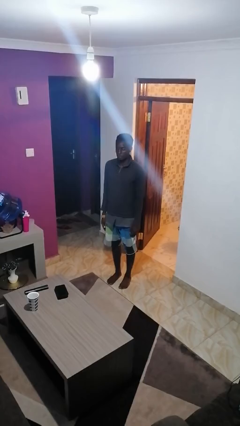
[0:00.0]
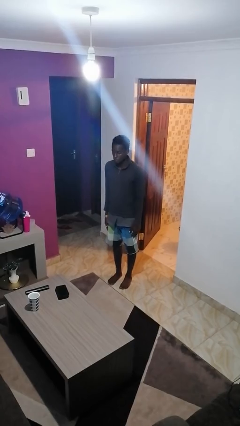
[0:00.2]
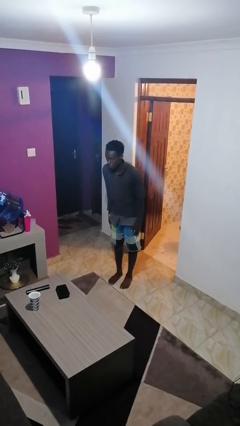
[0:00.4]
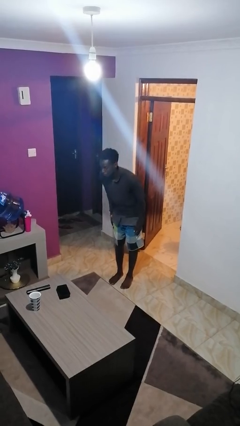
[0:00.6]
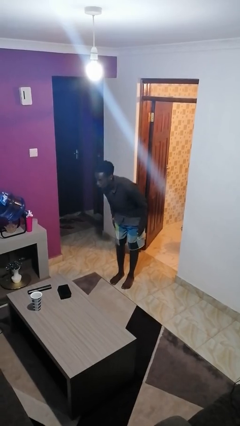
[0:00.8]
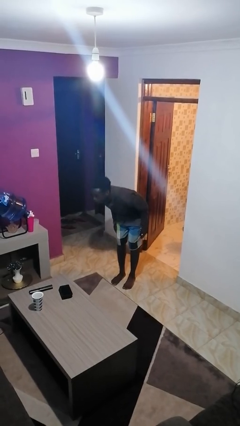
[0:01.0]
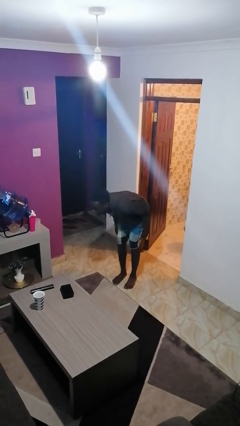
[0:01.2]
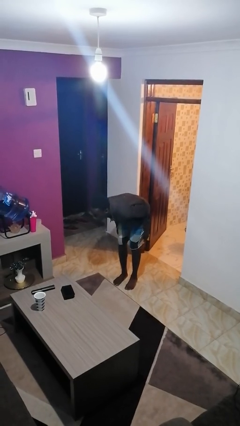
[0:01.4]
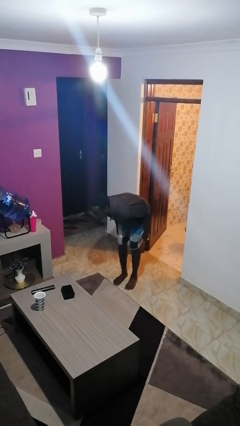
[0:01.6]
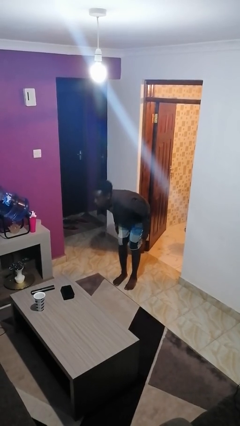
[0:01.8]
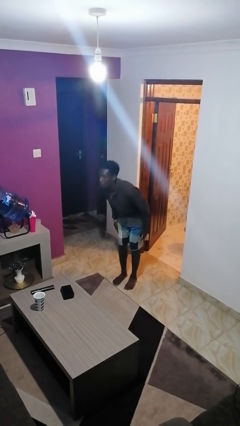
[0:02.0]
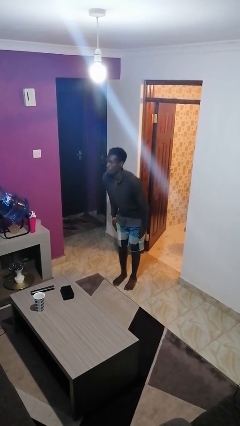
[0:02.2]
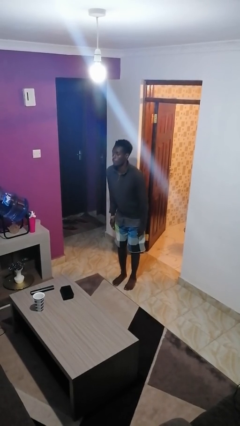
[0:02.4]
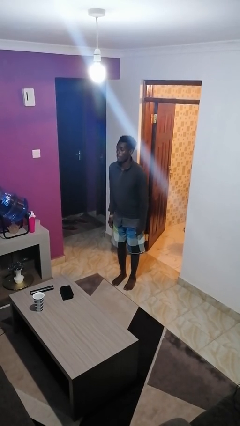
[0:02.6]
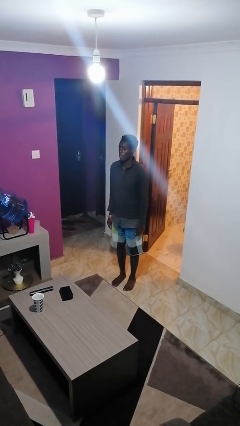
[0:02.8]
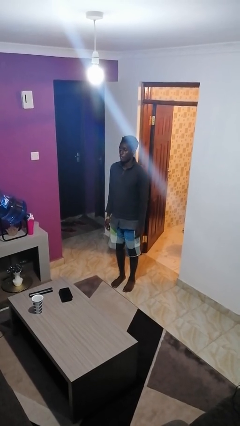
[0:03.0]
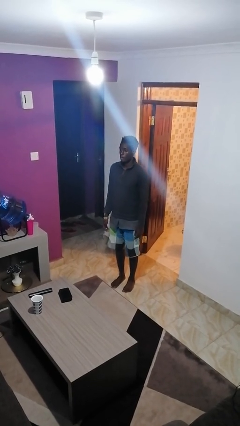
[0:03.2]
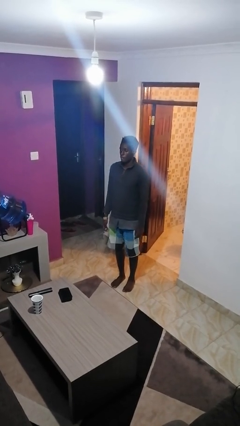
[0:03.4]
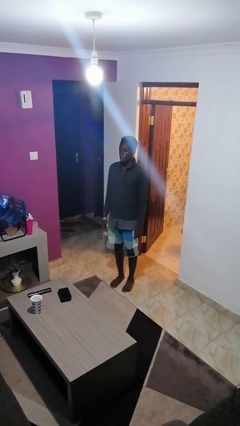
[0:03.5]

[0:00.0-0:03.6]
person bows

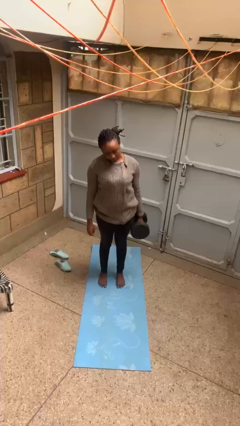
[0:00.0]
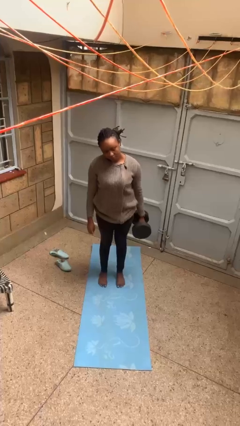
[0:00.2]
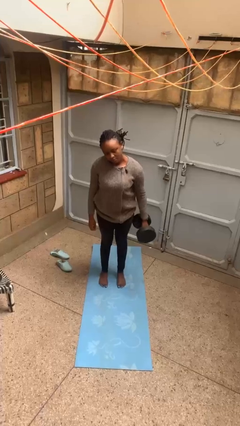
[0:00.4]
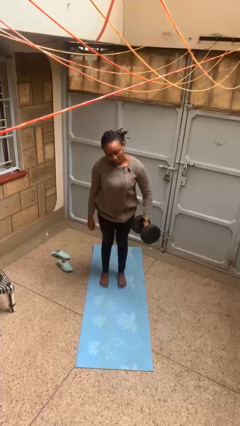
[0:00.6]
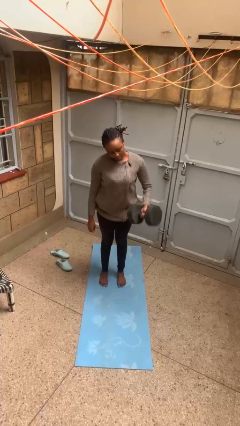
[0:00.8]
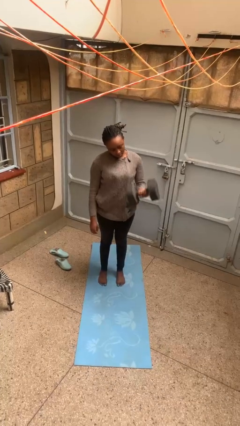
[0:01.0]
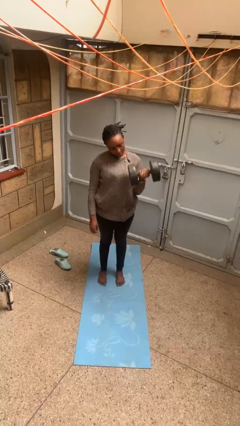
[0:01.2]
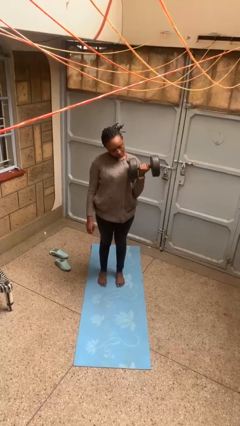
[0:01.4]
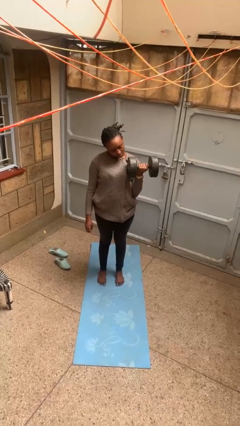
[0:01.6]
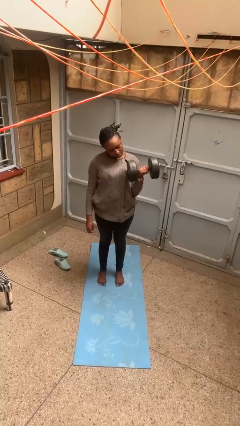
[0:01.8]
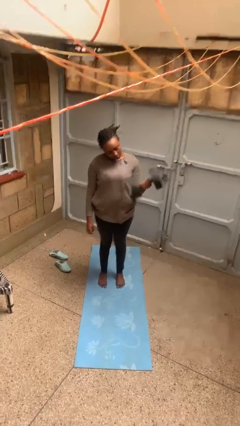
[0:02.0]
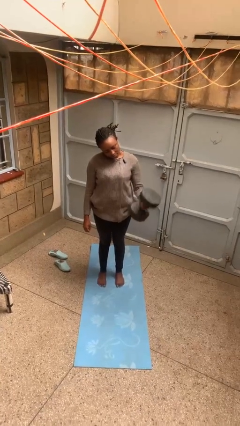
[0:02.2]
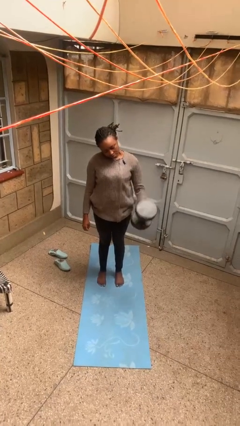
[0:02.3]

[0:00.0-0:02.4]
person lifts dumbbells

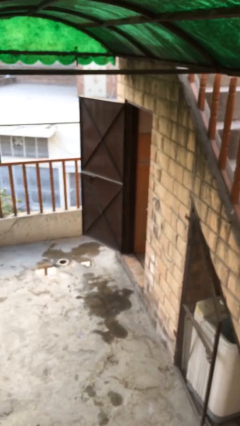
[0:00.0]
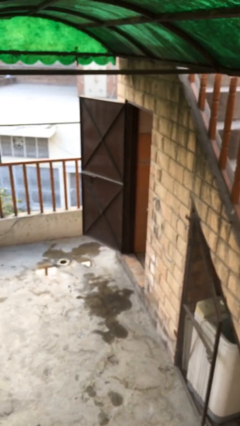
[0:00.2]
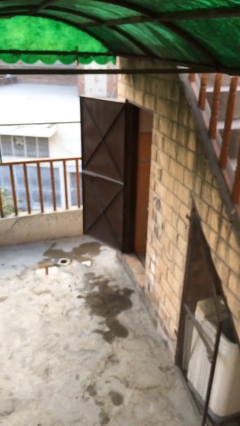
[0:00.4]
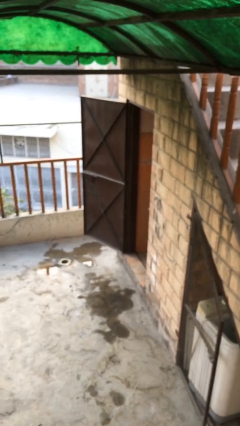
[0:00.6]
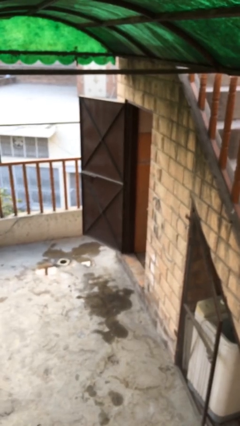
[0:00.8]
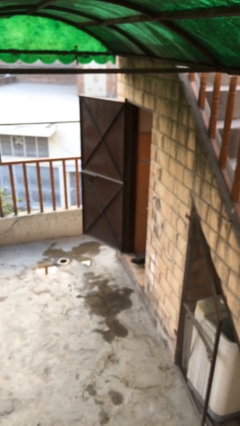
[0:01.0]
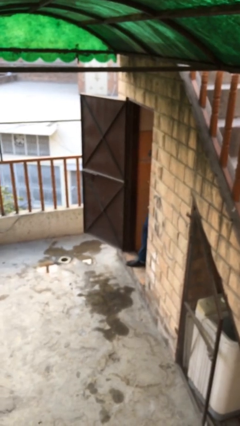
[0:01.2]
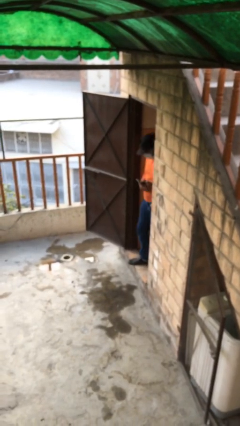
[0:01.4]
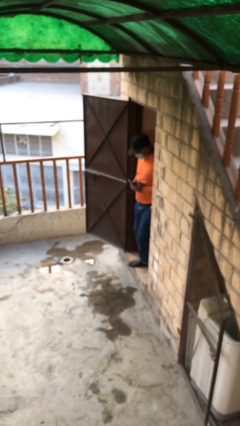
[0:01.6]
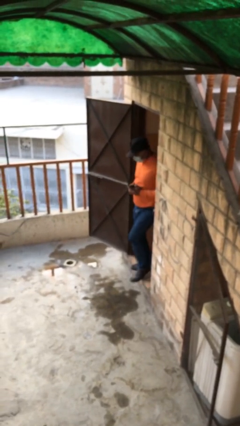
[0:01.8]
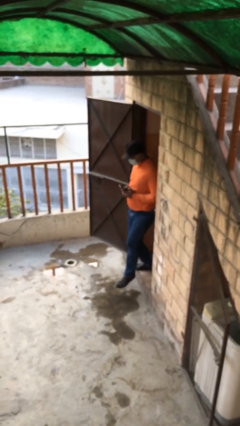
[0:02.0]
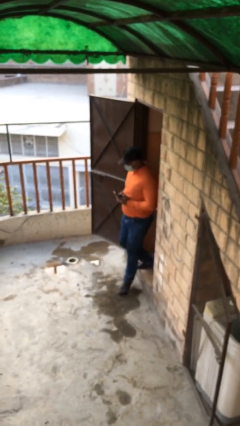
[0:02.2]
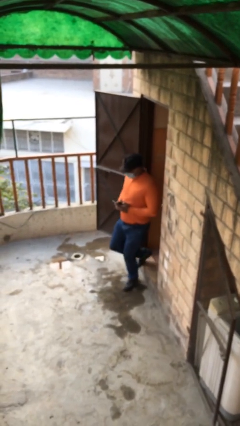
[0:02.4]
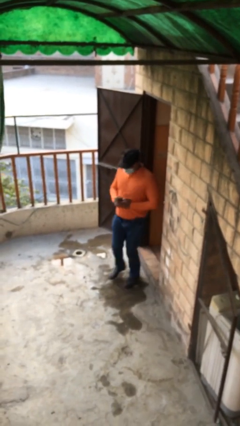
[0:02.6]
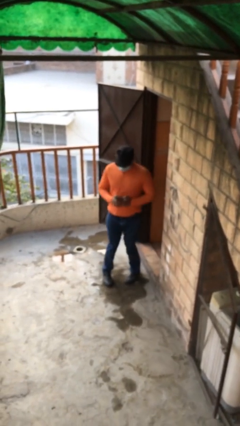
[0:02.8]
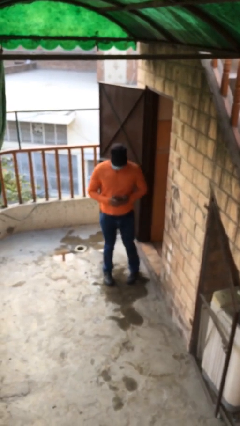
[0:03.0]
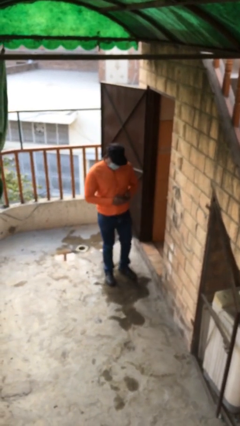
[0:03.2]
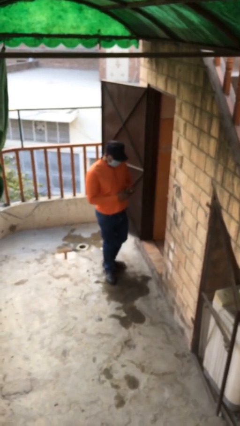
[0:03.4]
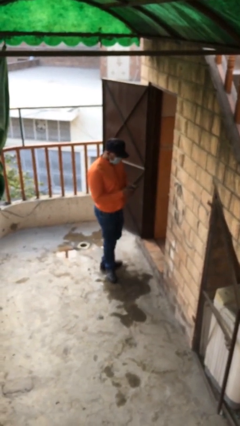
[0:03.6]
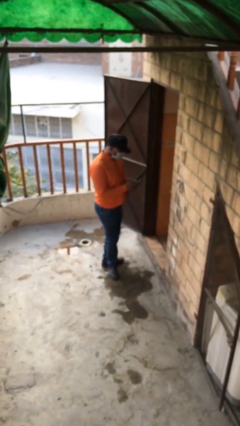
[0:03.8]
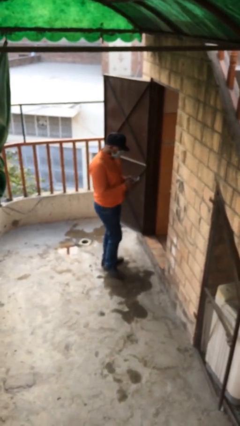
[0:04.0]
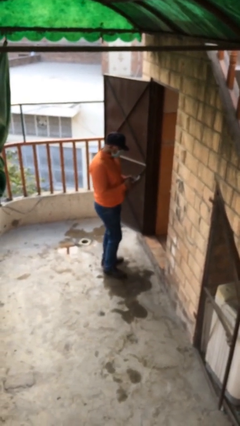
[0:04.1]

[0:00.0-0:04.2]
person exits scene through structure

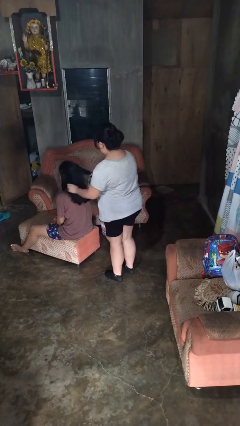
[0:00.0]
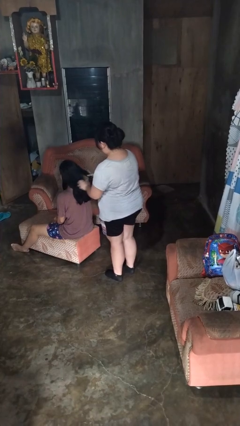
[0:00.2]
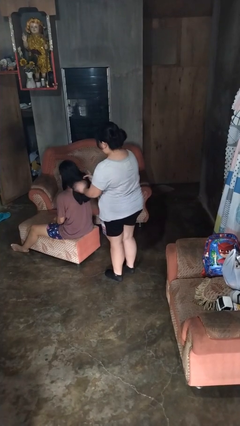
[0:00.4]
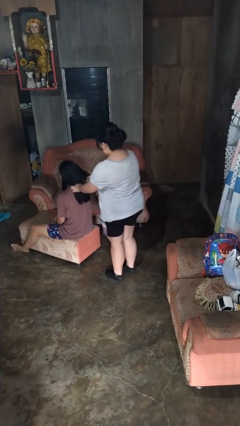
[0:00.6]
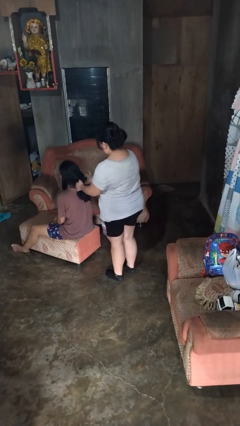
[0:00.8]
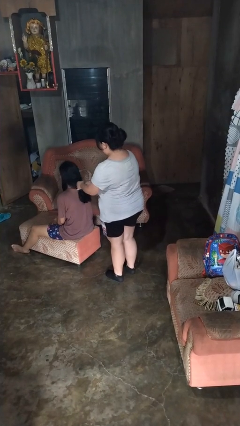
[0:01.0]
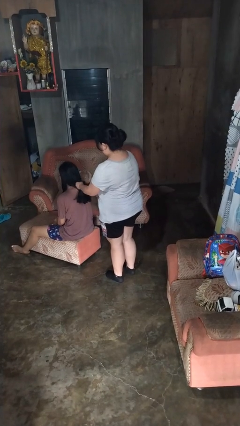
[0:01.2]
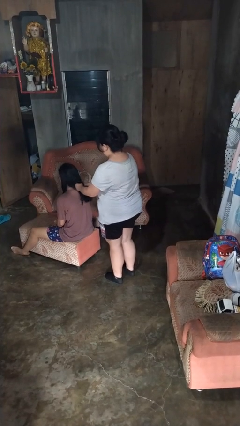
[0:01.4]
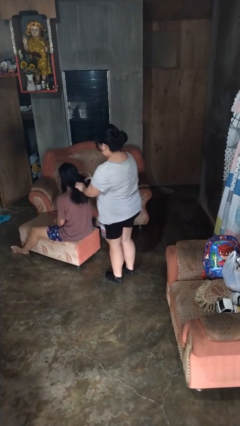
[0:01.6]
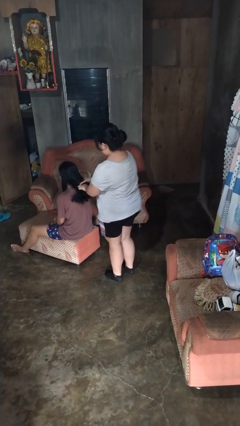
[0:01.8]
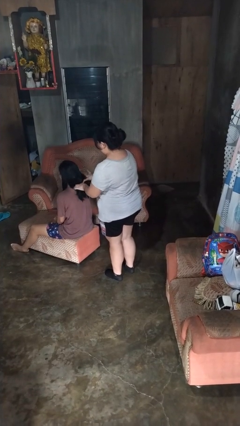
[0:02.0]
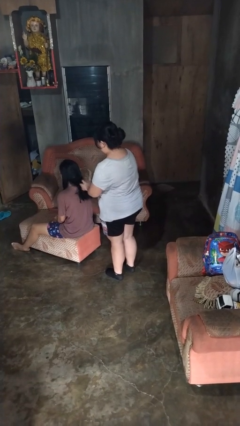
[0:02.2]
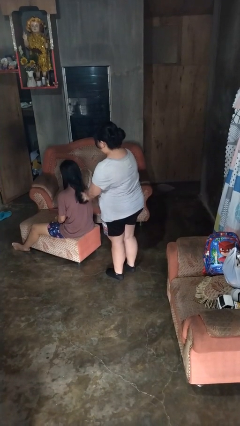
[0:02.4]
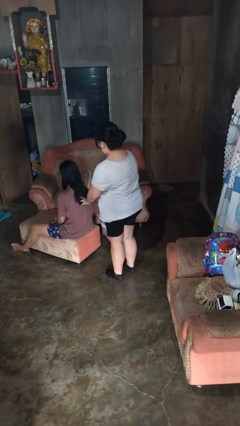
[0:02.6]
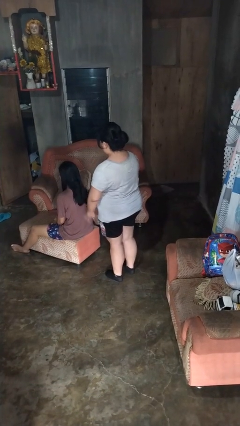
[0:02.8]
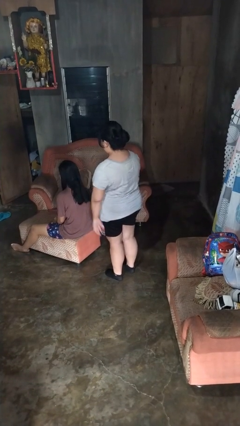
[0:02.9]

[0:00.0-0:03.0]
person braids hair of person

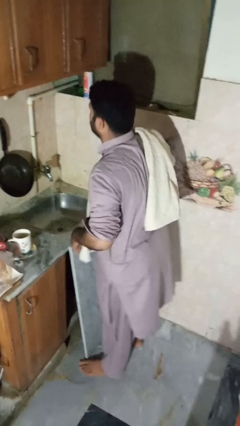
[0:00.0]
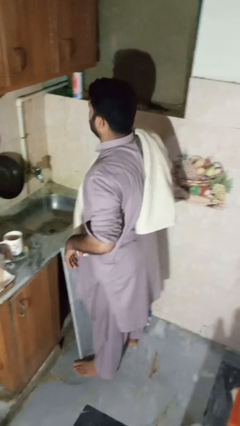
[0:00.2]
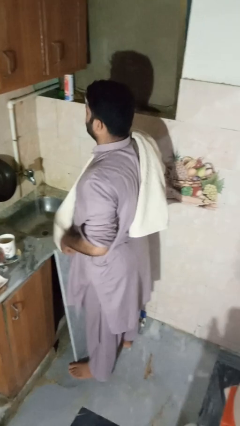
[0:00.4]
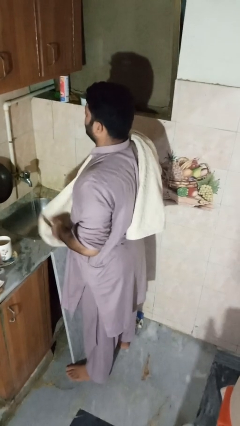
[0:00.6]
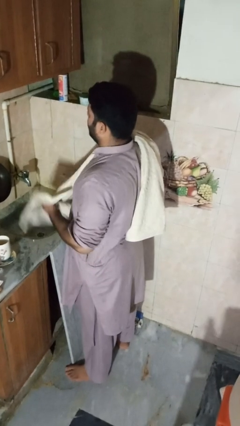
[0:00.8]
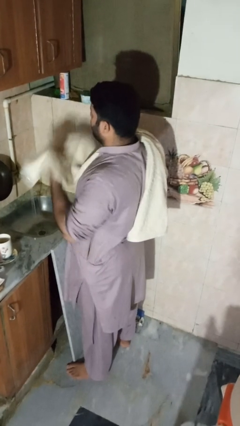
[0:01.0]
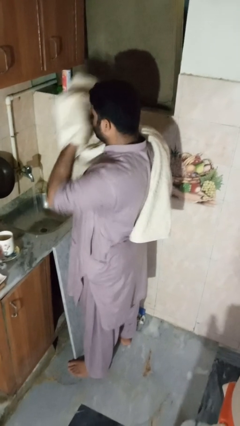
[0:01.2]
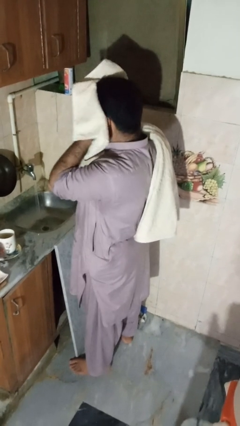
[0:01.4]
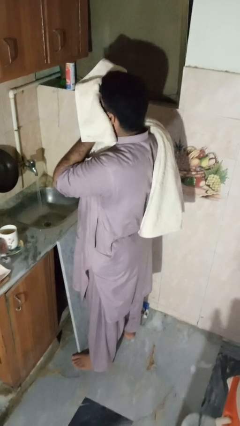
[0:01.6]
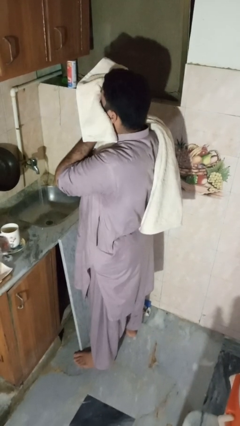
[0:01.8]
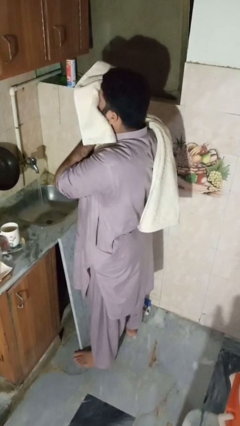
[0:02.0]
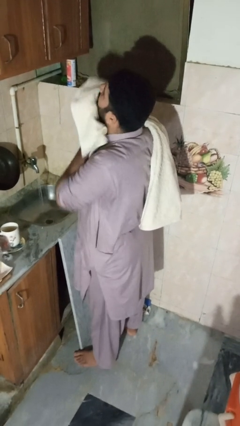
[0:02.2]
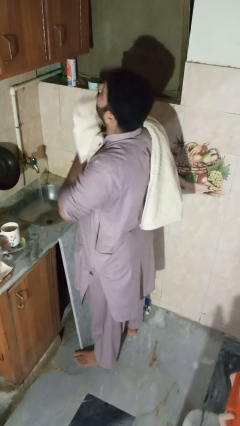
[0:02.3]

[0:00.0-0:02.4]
person dries face with towel

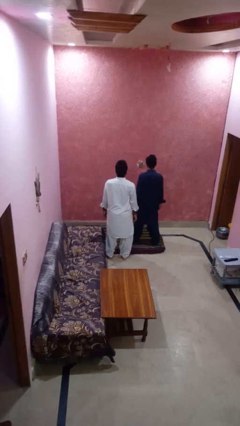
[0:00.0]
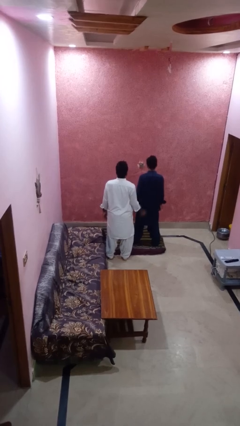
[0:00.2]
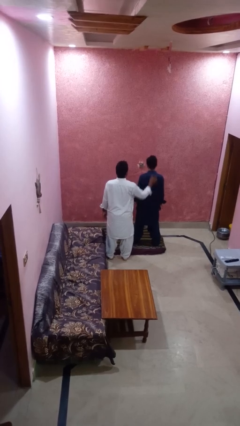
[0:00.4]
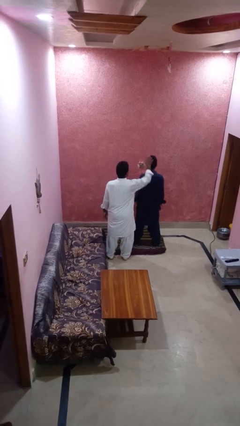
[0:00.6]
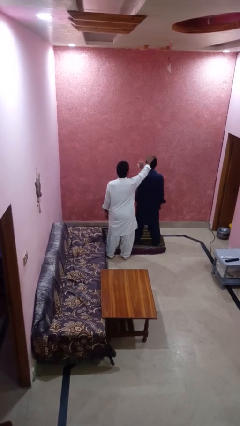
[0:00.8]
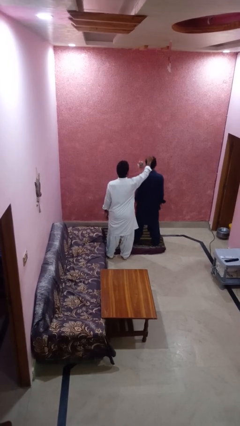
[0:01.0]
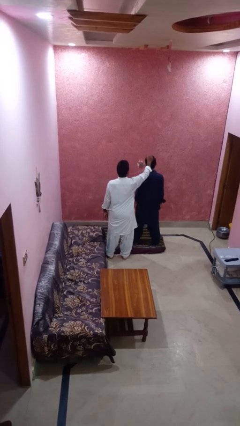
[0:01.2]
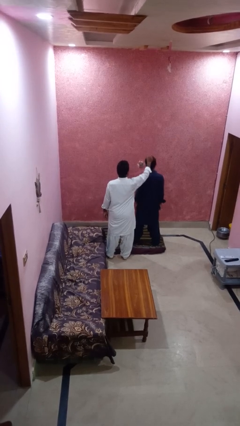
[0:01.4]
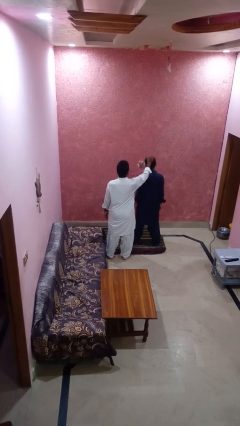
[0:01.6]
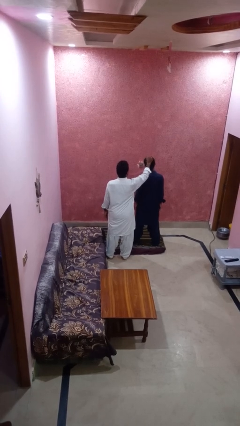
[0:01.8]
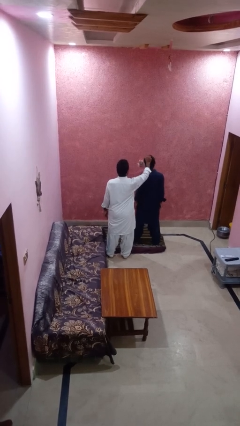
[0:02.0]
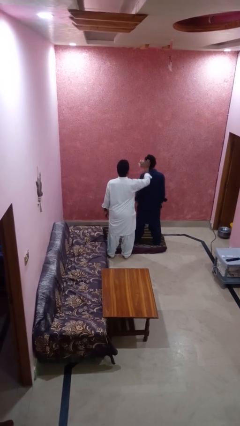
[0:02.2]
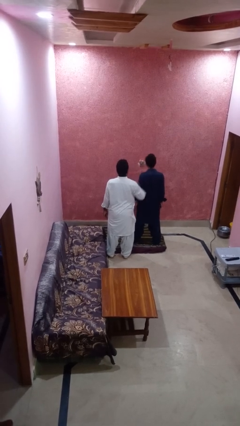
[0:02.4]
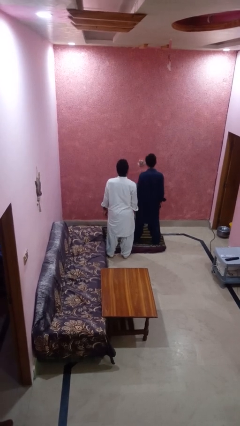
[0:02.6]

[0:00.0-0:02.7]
person grabs person by hair
